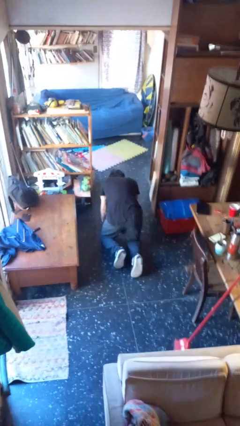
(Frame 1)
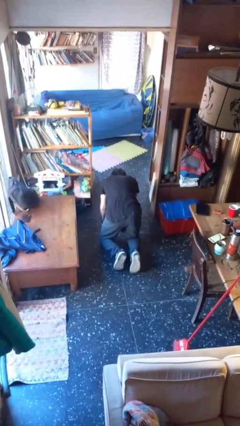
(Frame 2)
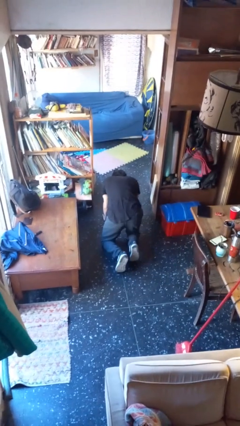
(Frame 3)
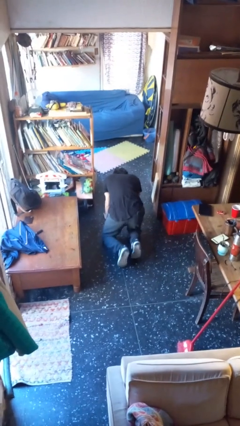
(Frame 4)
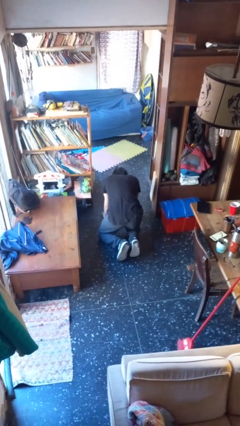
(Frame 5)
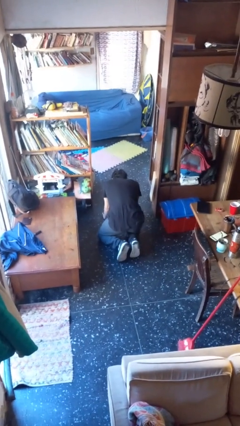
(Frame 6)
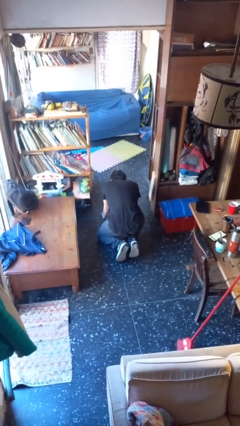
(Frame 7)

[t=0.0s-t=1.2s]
person crawls

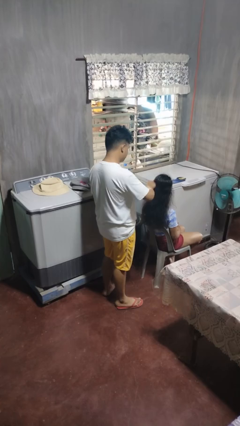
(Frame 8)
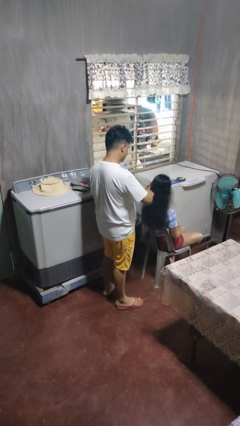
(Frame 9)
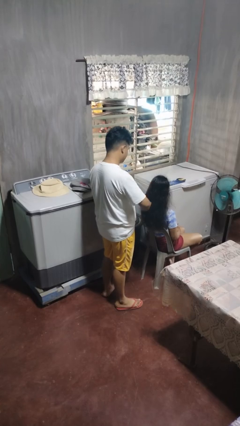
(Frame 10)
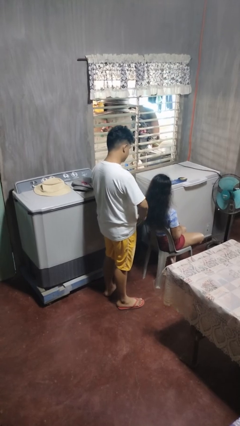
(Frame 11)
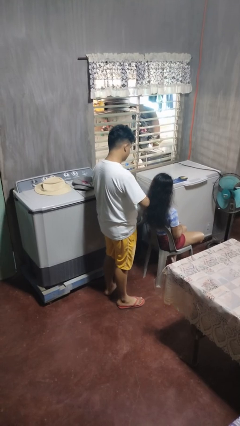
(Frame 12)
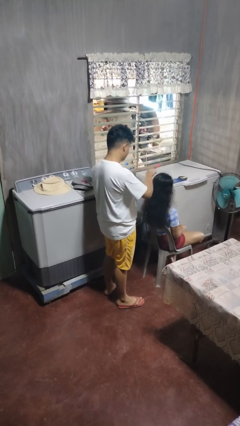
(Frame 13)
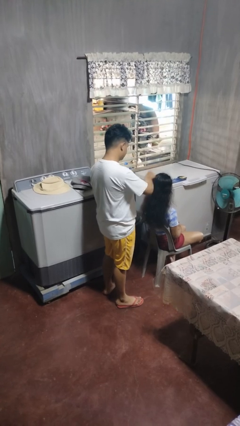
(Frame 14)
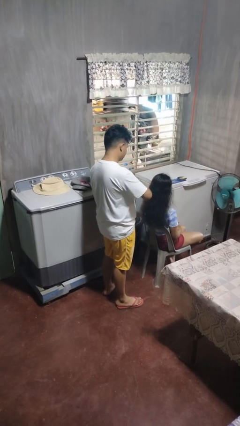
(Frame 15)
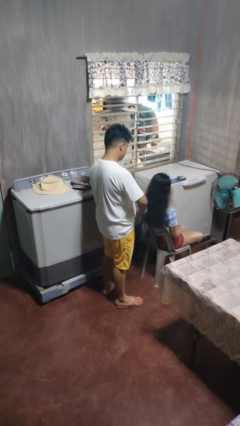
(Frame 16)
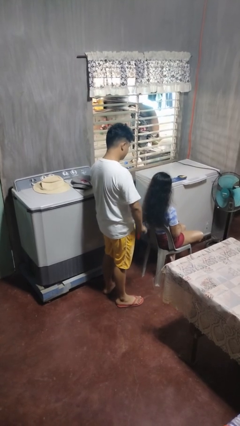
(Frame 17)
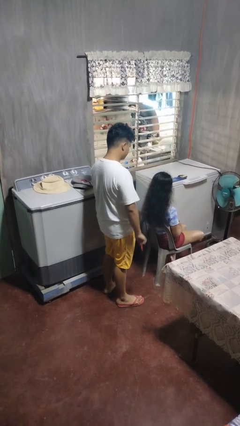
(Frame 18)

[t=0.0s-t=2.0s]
person brushes hair of person

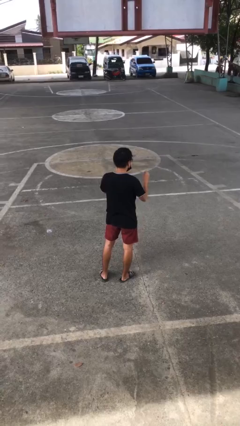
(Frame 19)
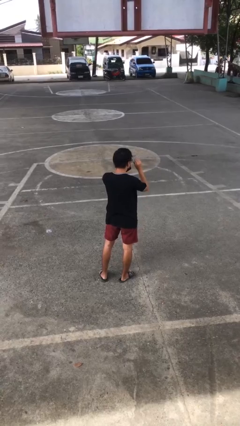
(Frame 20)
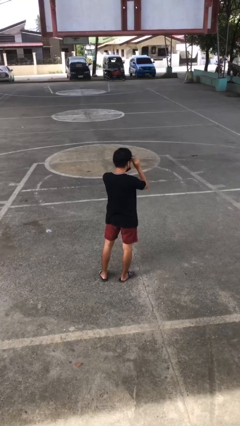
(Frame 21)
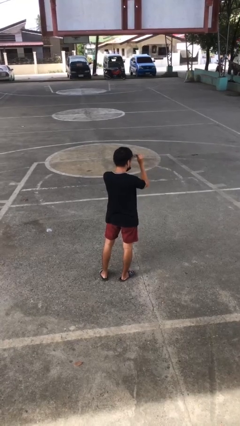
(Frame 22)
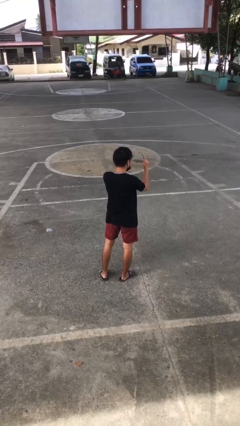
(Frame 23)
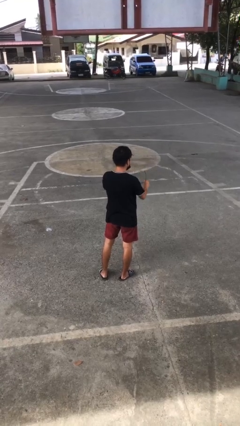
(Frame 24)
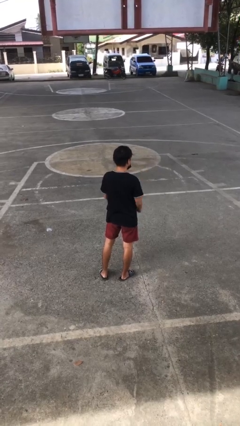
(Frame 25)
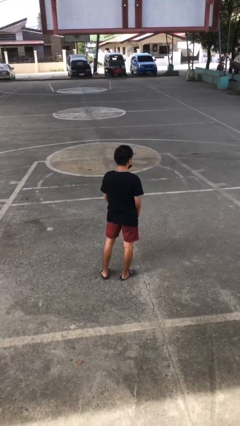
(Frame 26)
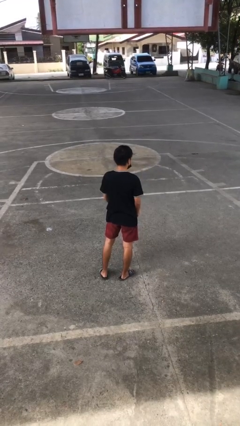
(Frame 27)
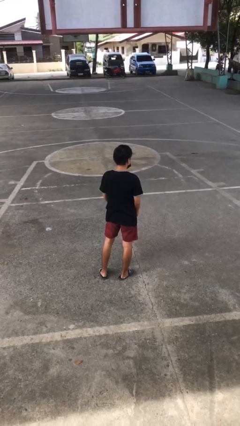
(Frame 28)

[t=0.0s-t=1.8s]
person takes off glasses

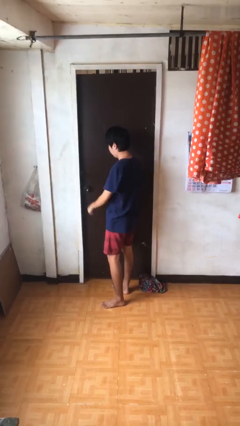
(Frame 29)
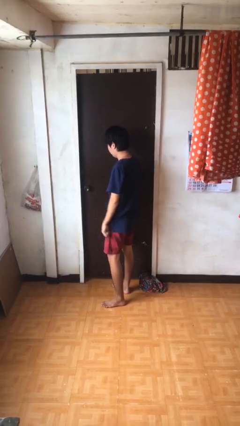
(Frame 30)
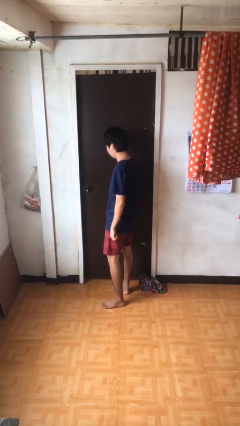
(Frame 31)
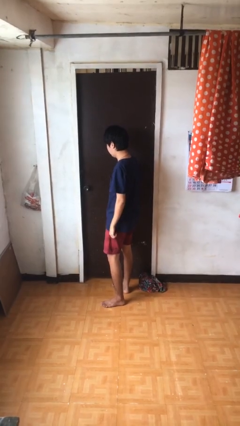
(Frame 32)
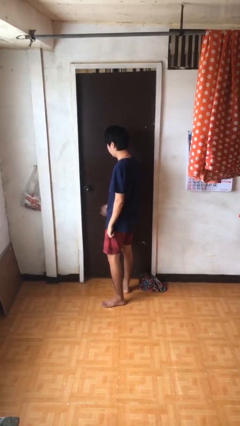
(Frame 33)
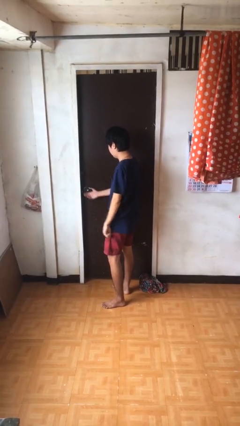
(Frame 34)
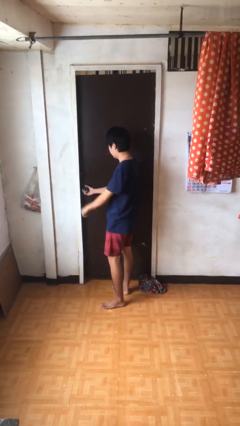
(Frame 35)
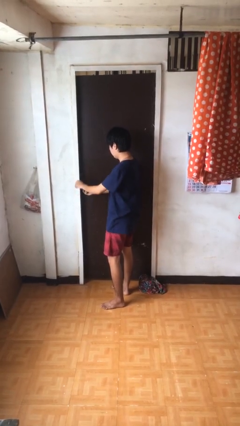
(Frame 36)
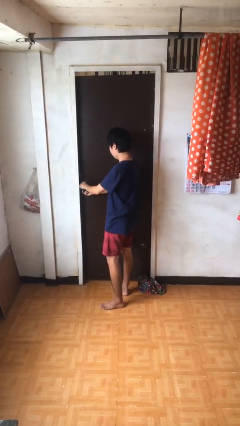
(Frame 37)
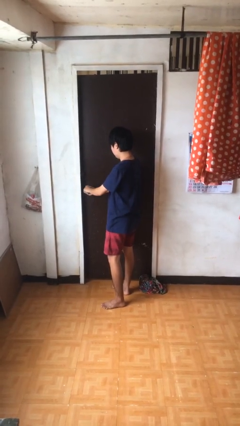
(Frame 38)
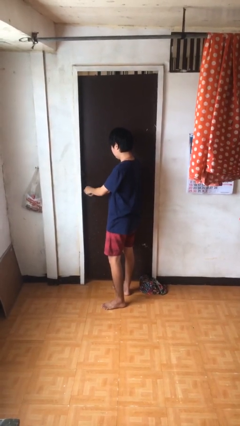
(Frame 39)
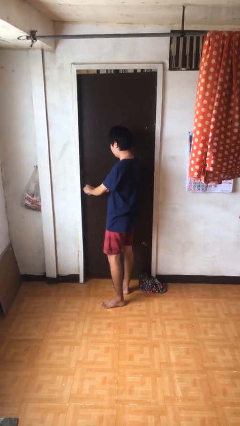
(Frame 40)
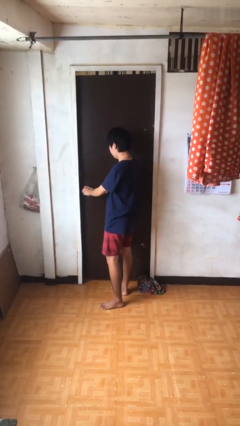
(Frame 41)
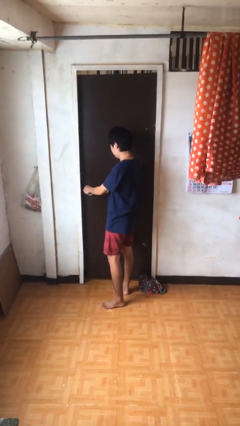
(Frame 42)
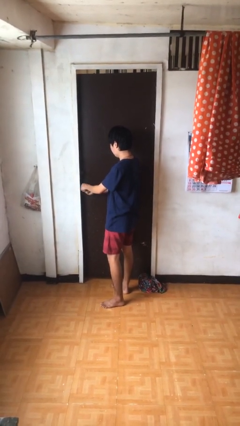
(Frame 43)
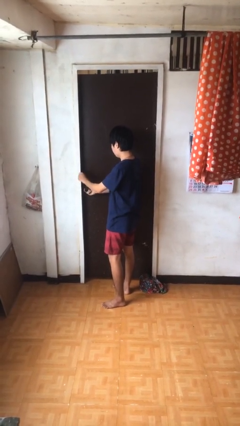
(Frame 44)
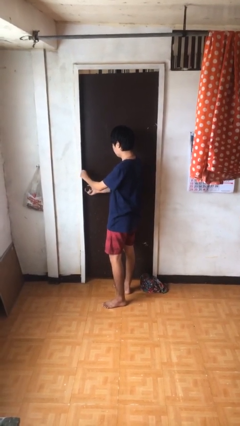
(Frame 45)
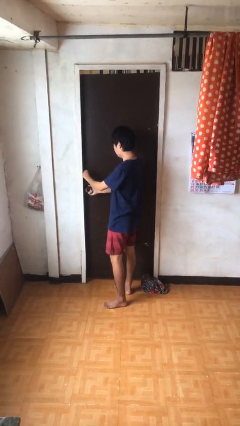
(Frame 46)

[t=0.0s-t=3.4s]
person unlocks door with keys

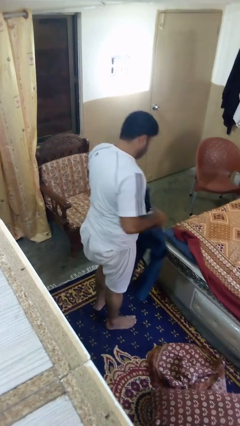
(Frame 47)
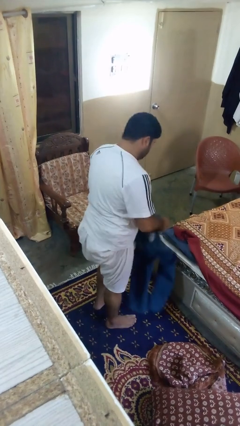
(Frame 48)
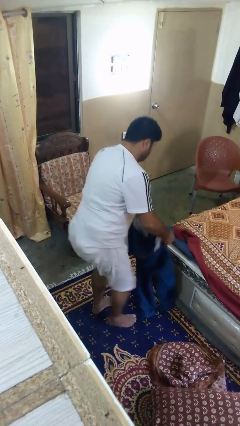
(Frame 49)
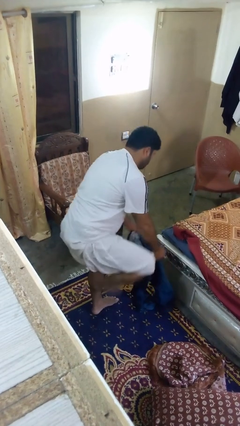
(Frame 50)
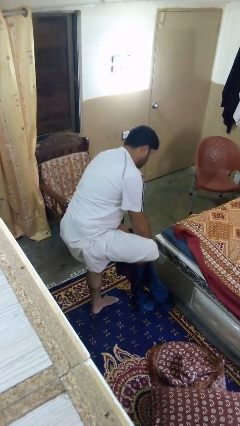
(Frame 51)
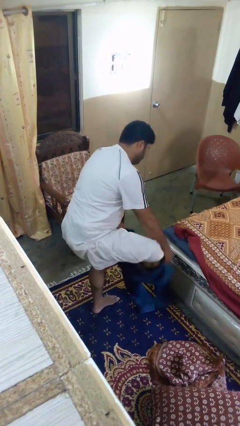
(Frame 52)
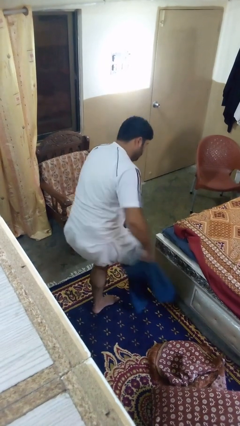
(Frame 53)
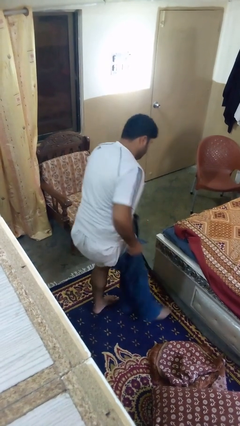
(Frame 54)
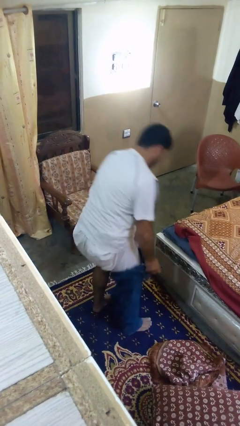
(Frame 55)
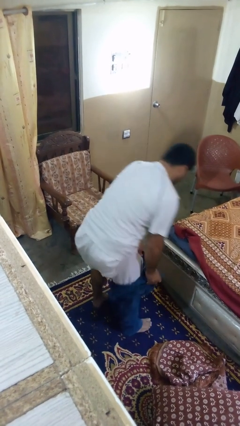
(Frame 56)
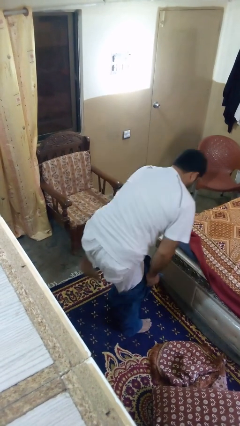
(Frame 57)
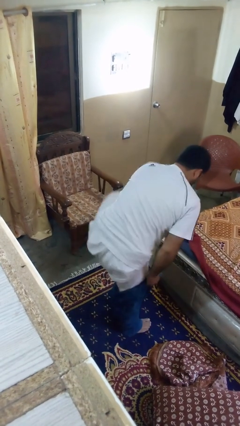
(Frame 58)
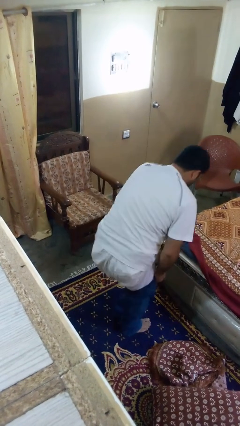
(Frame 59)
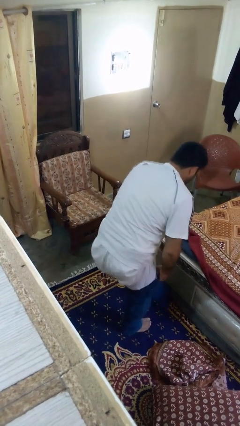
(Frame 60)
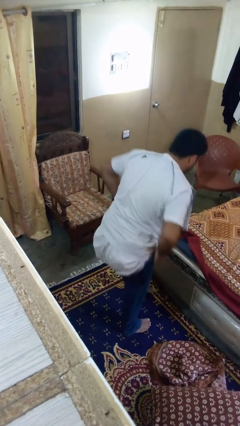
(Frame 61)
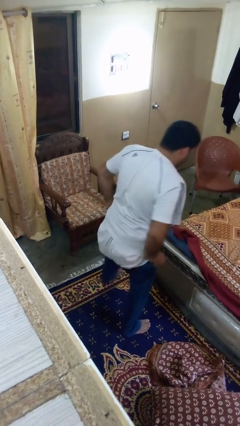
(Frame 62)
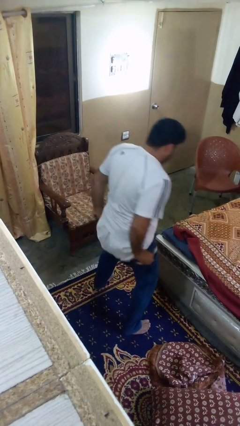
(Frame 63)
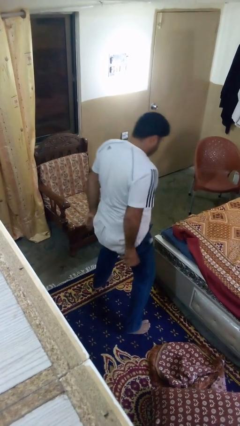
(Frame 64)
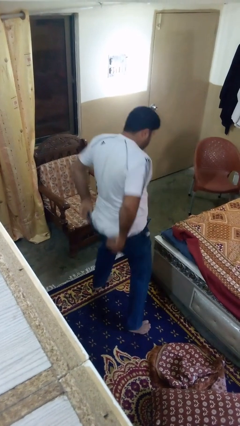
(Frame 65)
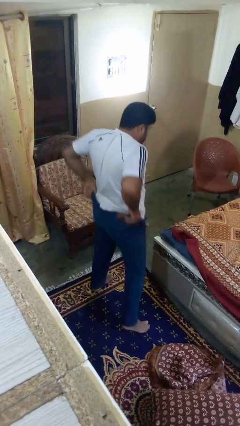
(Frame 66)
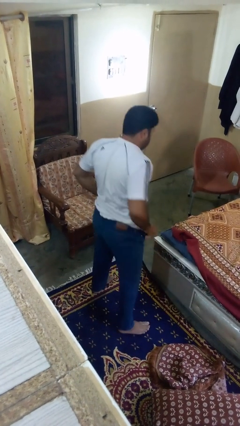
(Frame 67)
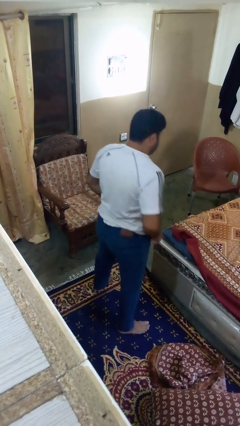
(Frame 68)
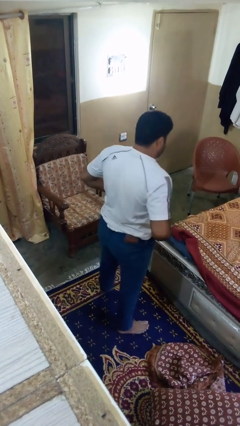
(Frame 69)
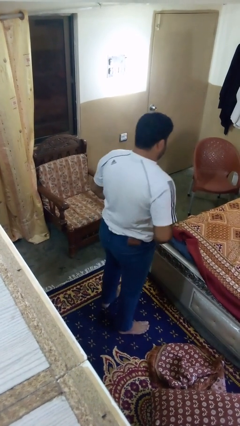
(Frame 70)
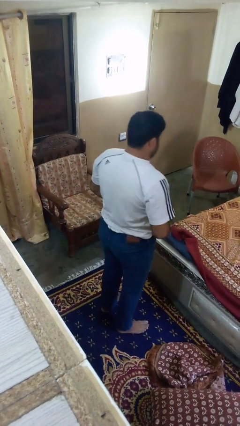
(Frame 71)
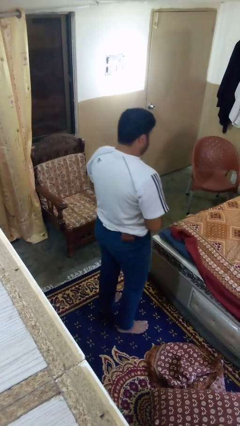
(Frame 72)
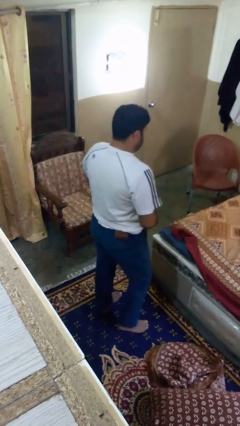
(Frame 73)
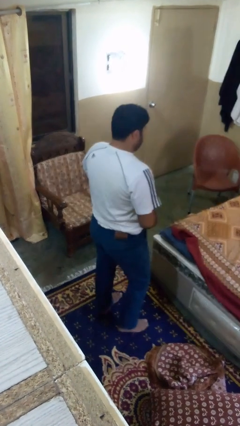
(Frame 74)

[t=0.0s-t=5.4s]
person puts on pants

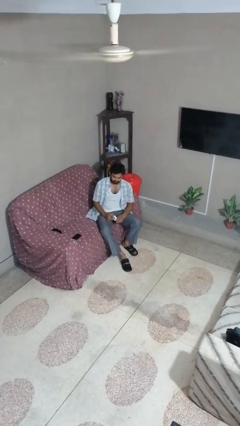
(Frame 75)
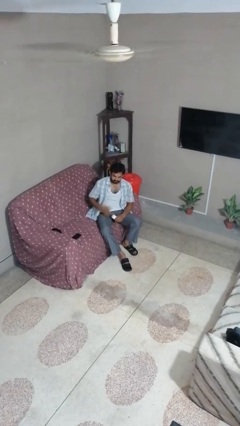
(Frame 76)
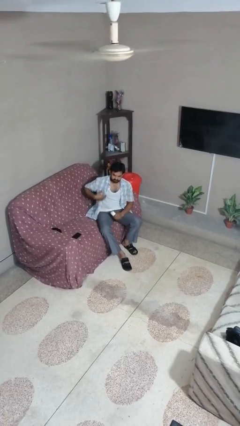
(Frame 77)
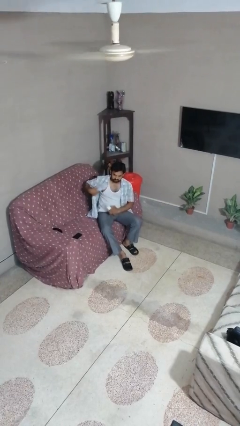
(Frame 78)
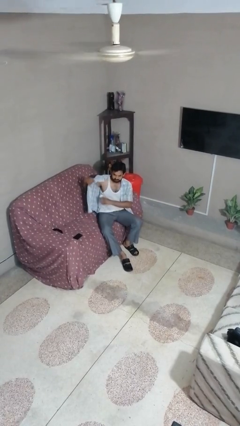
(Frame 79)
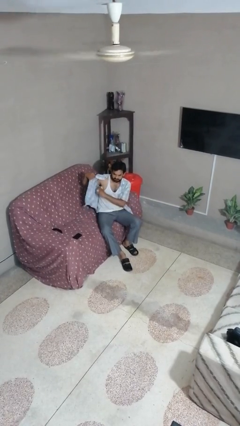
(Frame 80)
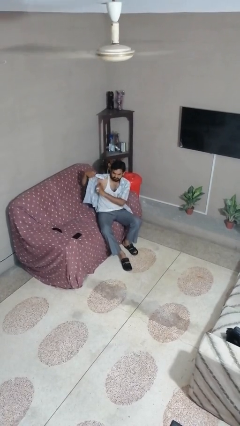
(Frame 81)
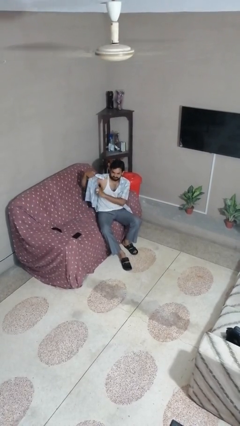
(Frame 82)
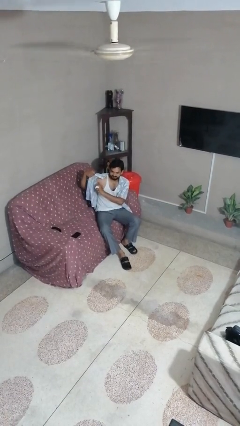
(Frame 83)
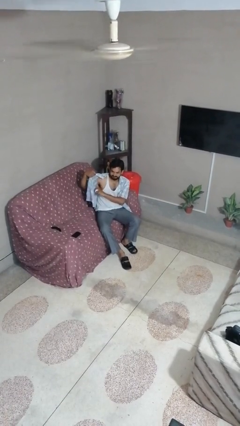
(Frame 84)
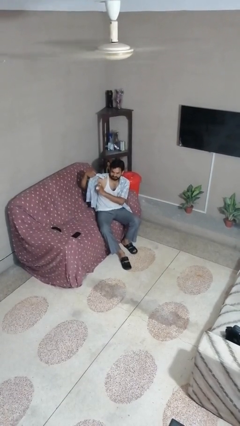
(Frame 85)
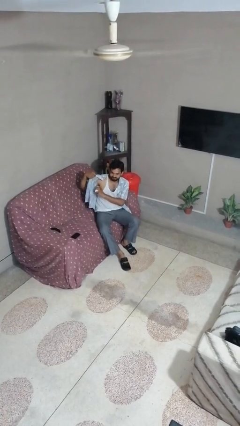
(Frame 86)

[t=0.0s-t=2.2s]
person applies deodorant

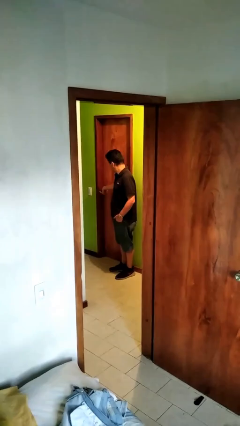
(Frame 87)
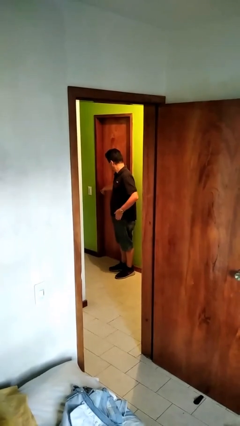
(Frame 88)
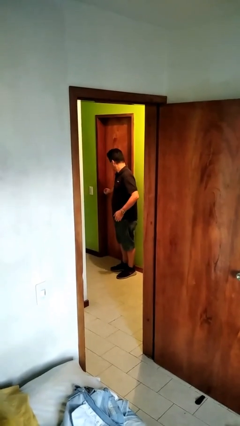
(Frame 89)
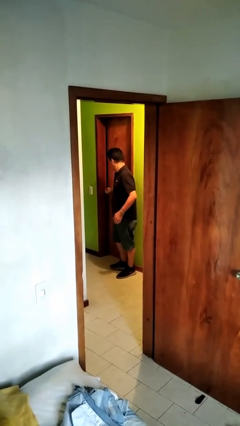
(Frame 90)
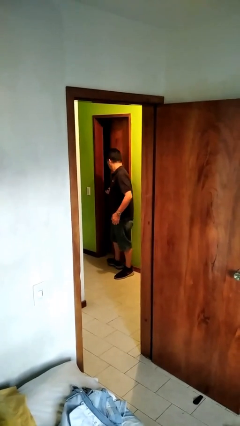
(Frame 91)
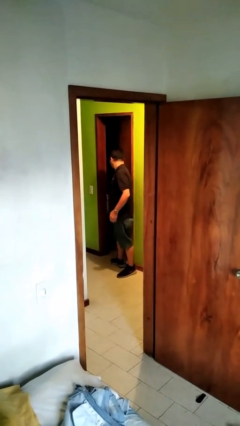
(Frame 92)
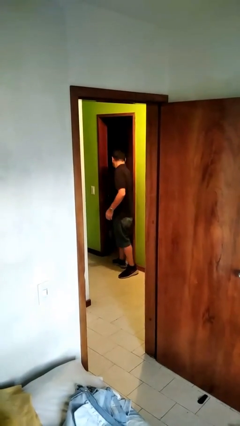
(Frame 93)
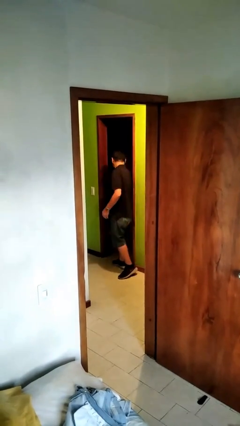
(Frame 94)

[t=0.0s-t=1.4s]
person opens facility door
